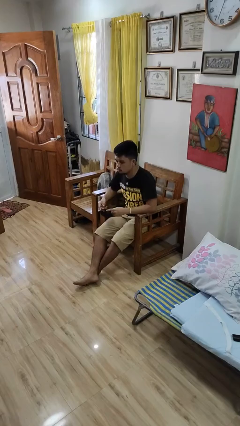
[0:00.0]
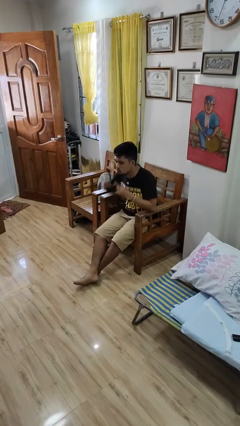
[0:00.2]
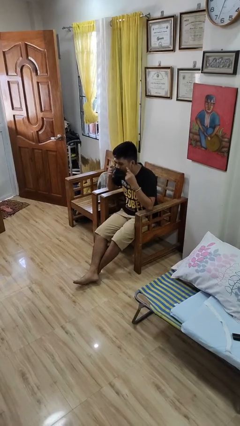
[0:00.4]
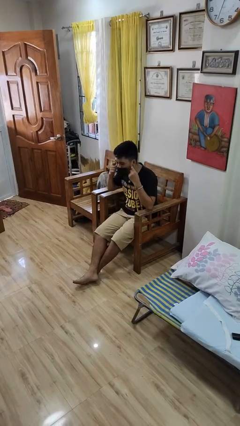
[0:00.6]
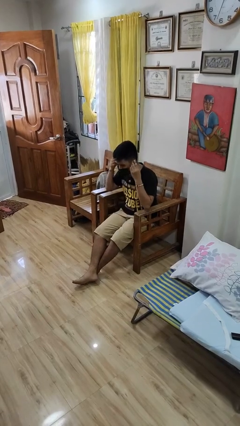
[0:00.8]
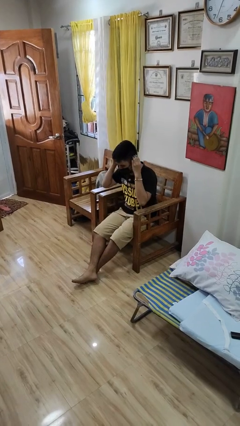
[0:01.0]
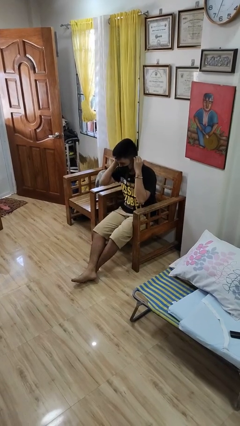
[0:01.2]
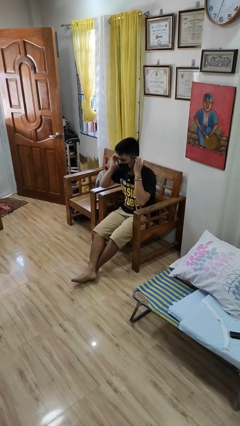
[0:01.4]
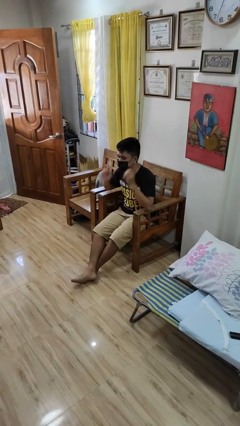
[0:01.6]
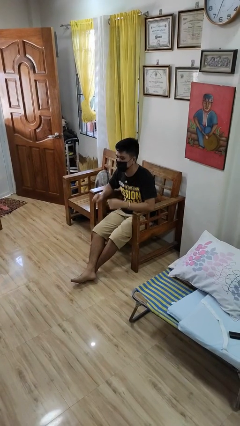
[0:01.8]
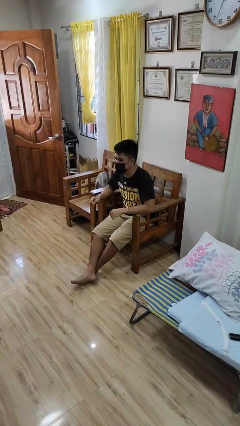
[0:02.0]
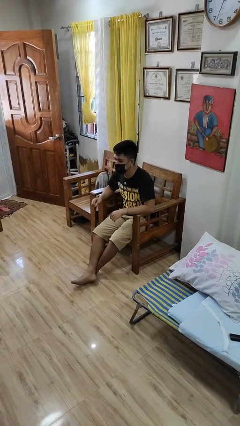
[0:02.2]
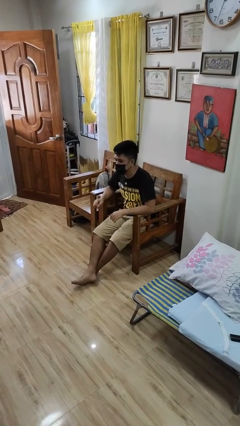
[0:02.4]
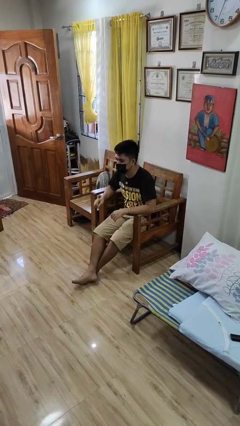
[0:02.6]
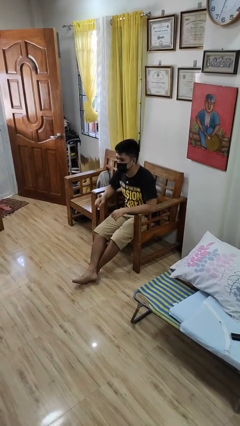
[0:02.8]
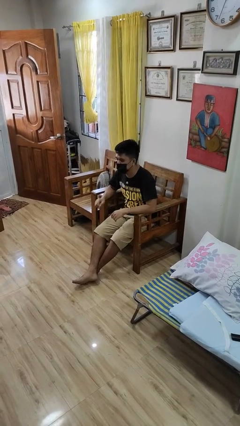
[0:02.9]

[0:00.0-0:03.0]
person puts on facemask

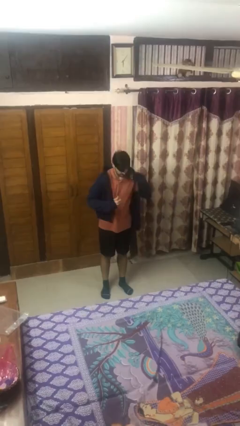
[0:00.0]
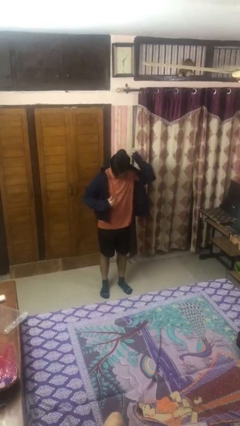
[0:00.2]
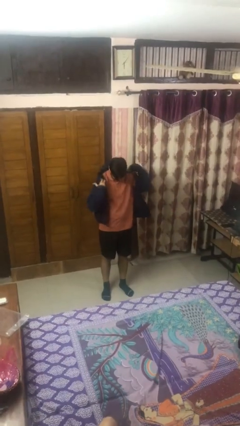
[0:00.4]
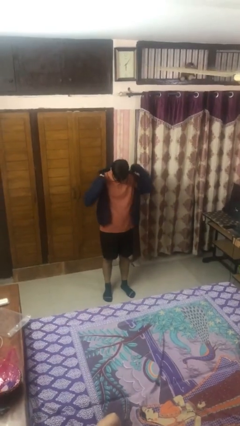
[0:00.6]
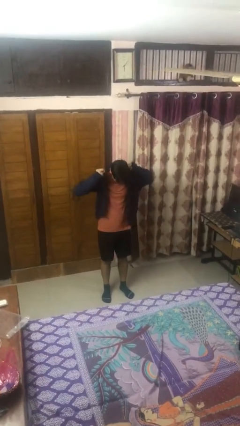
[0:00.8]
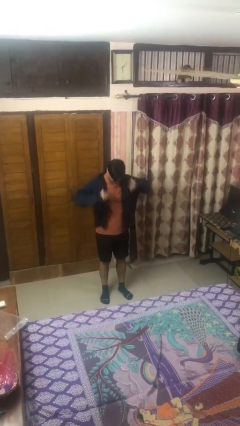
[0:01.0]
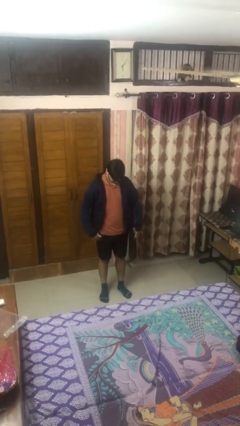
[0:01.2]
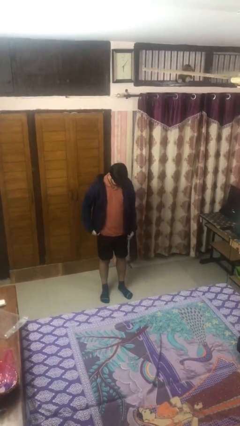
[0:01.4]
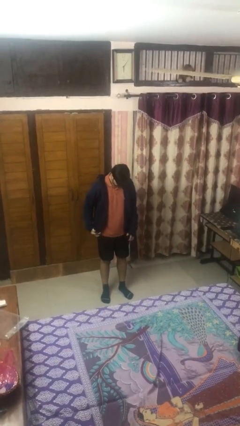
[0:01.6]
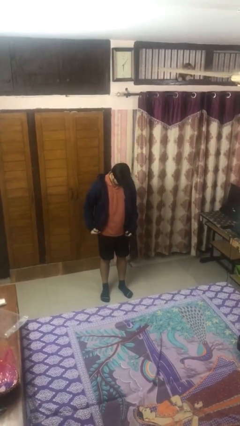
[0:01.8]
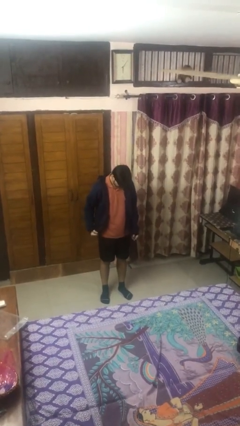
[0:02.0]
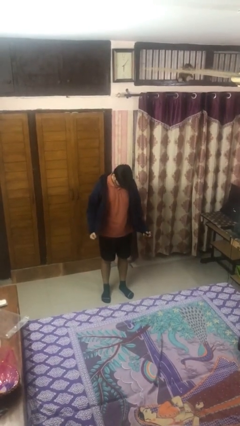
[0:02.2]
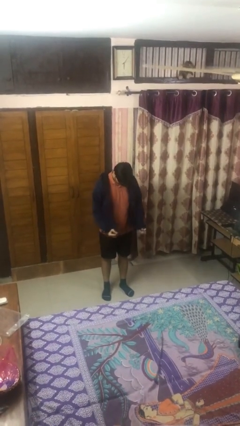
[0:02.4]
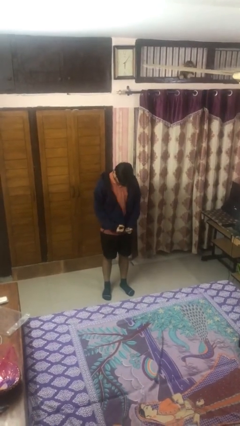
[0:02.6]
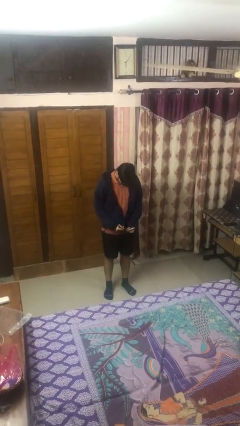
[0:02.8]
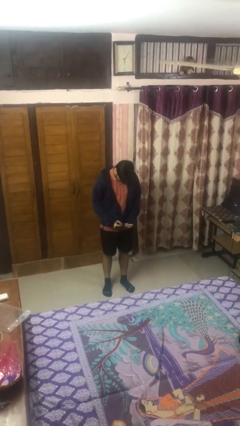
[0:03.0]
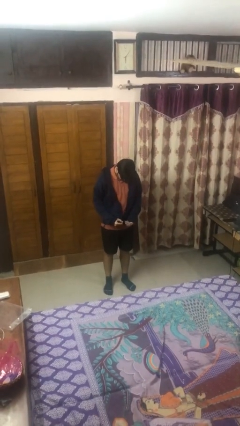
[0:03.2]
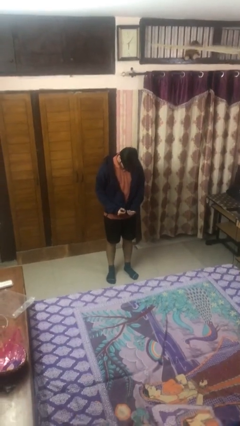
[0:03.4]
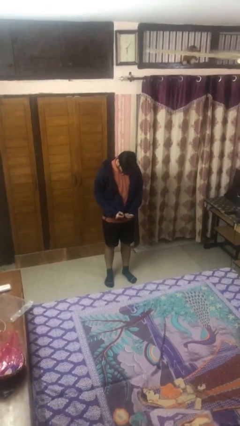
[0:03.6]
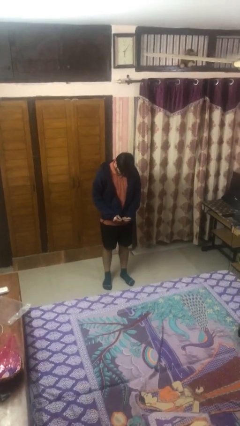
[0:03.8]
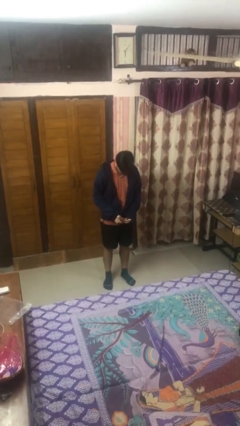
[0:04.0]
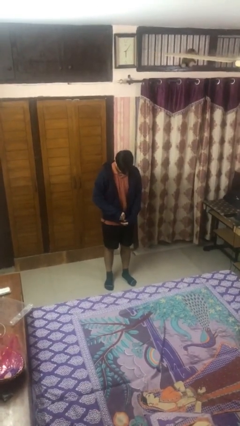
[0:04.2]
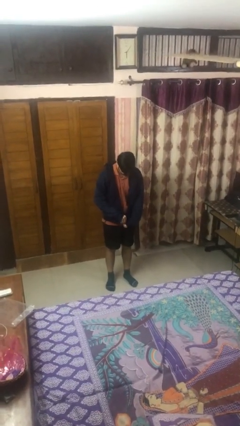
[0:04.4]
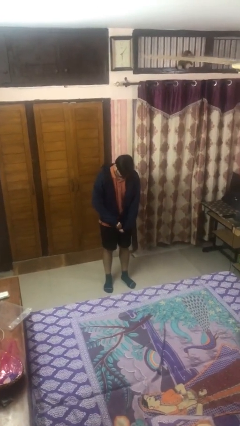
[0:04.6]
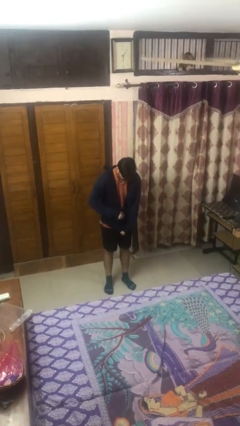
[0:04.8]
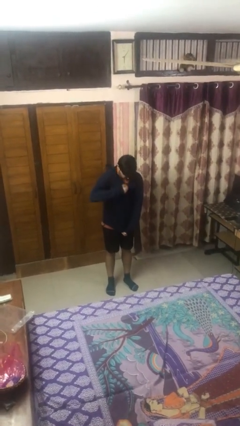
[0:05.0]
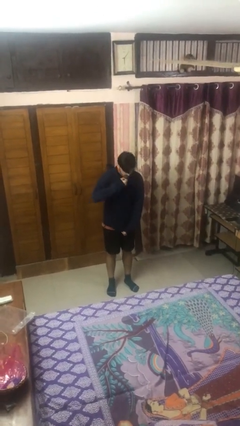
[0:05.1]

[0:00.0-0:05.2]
person zips up jacket

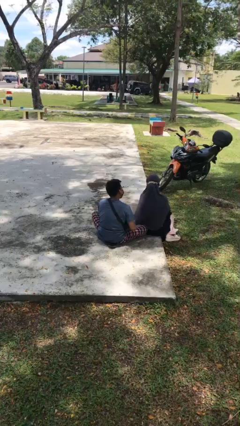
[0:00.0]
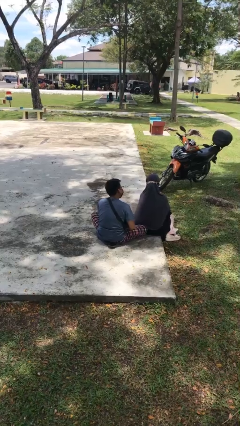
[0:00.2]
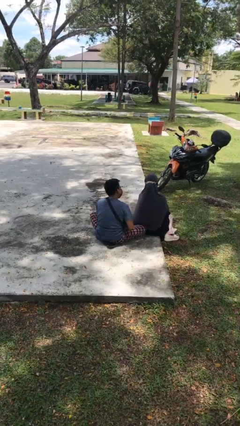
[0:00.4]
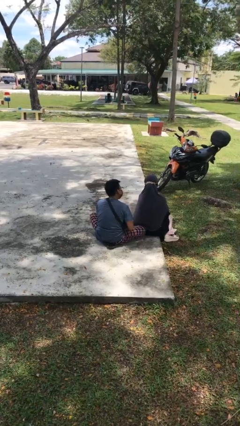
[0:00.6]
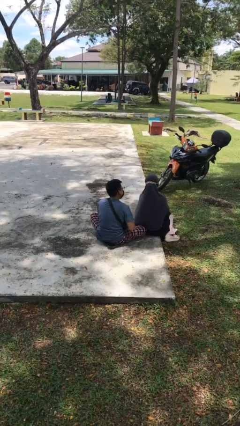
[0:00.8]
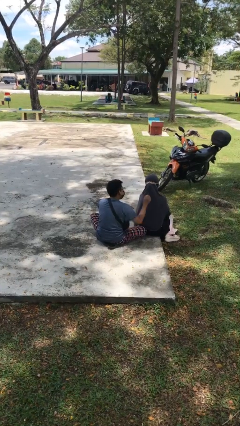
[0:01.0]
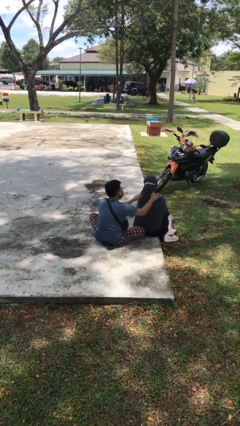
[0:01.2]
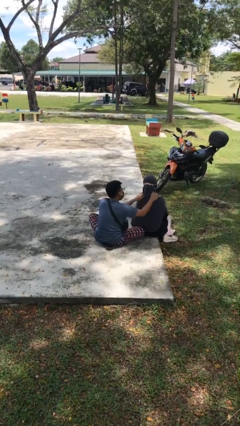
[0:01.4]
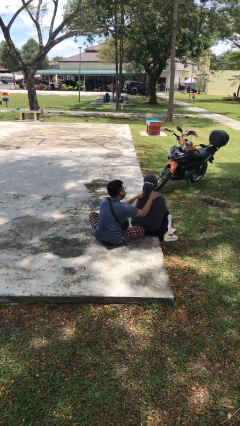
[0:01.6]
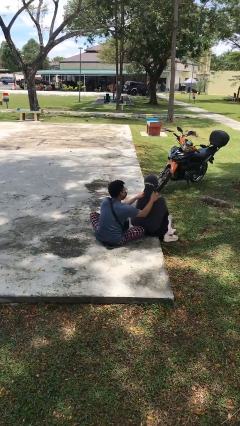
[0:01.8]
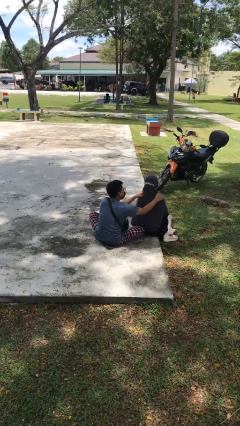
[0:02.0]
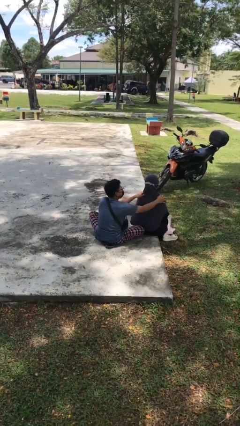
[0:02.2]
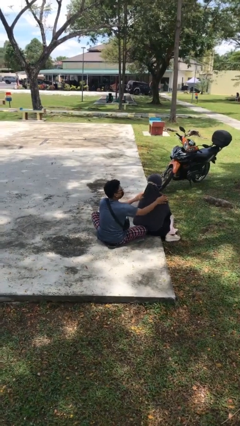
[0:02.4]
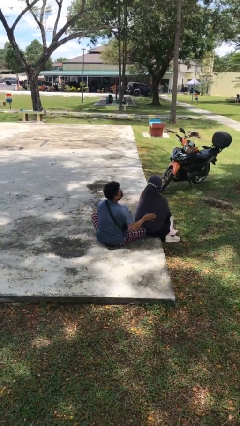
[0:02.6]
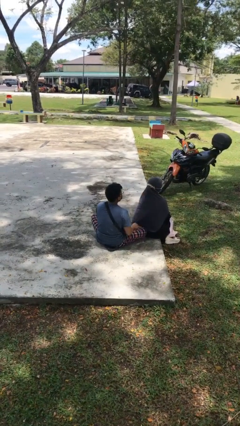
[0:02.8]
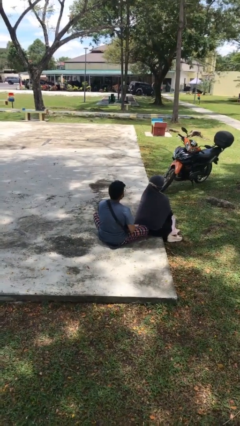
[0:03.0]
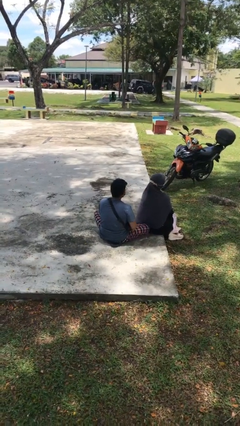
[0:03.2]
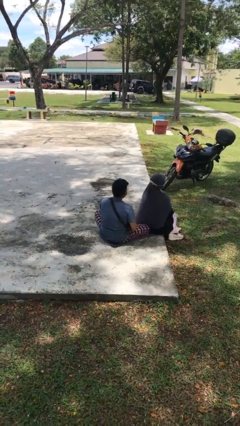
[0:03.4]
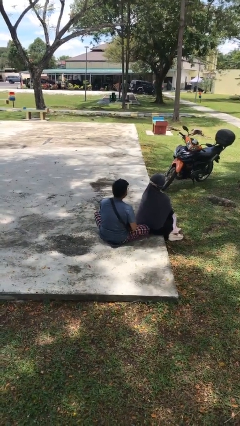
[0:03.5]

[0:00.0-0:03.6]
person pounds shoulders of person

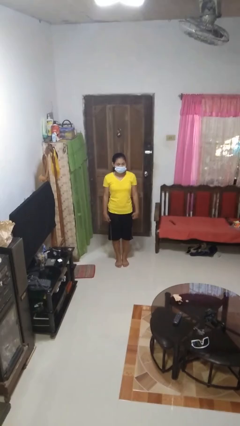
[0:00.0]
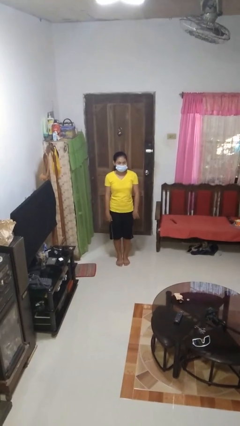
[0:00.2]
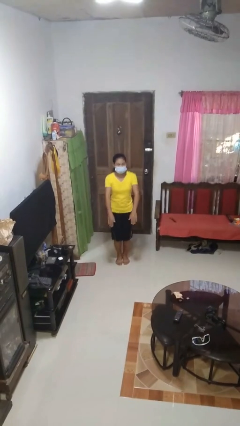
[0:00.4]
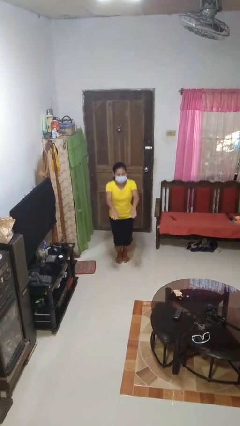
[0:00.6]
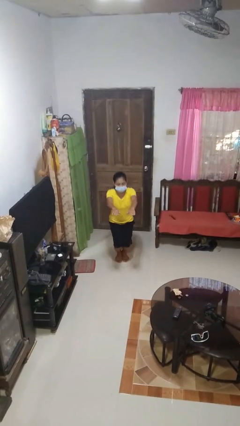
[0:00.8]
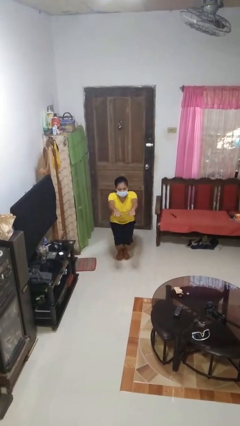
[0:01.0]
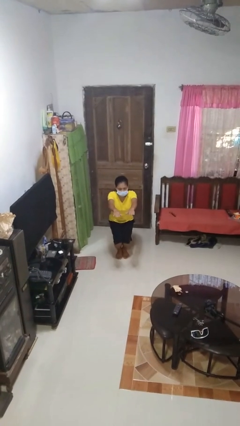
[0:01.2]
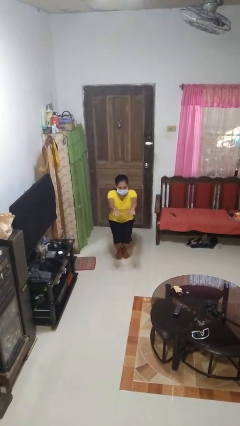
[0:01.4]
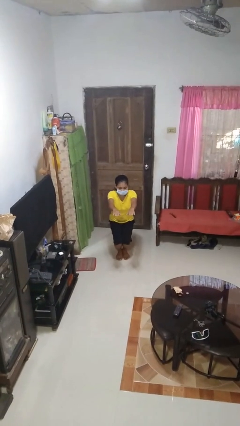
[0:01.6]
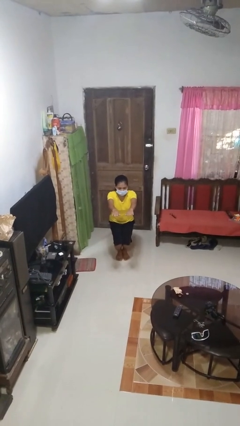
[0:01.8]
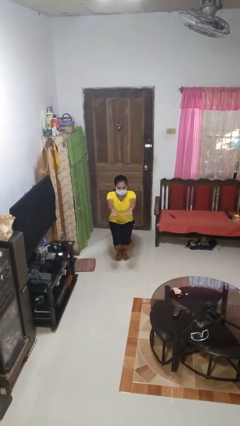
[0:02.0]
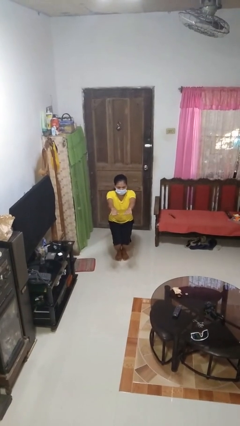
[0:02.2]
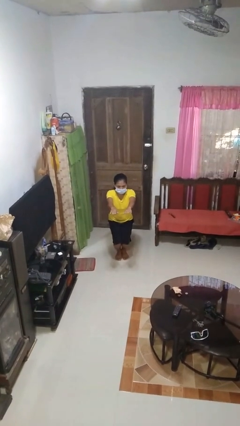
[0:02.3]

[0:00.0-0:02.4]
person squats

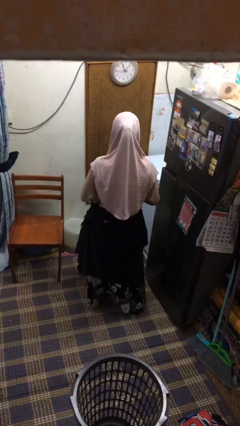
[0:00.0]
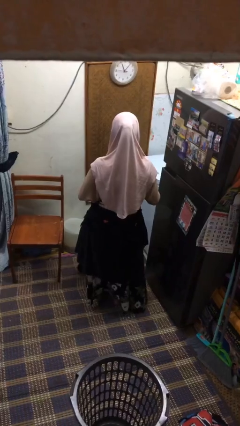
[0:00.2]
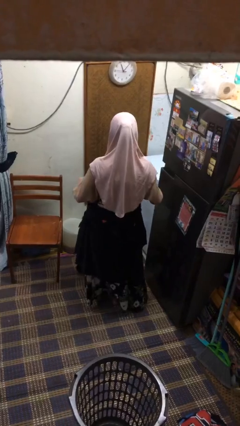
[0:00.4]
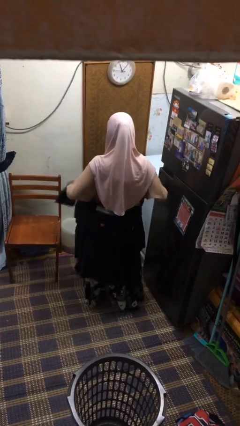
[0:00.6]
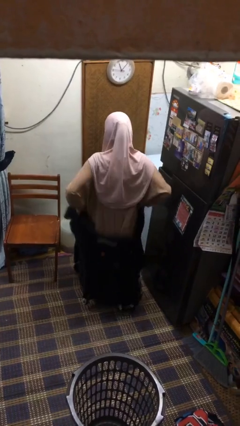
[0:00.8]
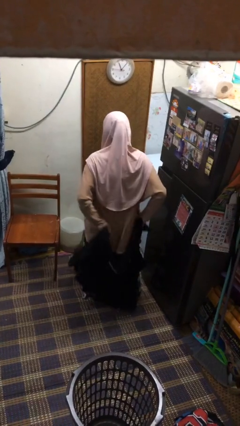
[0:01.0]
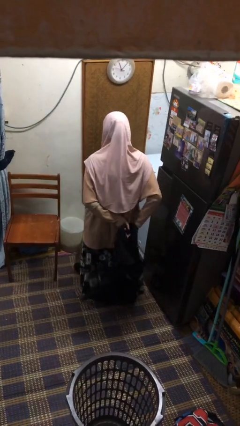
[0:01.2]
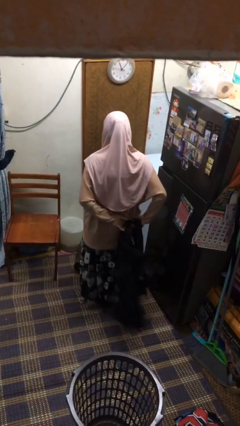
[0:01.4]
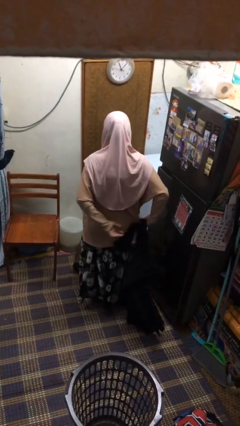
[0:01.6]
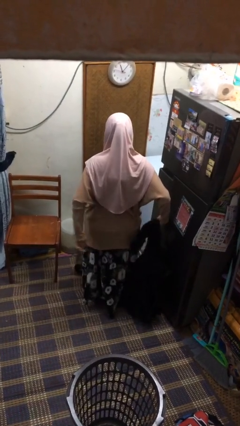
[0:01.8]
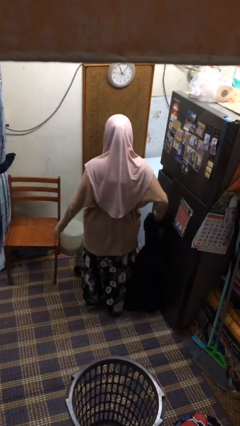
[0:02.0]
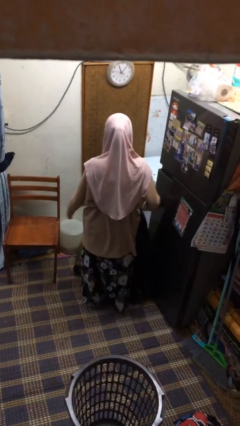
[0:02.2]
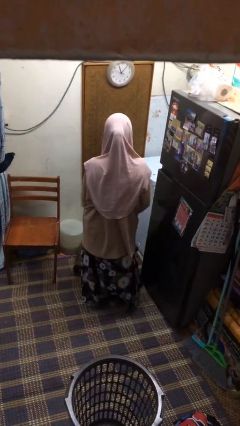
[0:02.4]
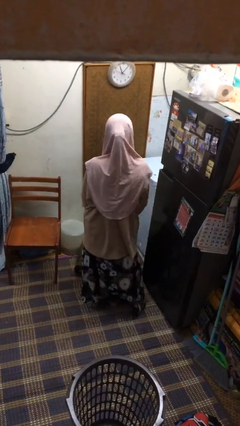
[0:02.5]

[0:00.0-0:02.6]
person unties jacket around waist

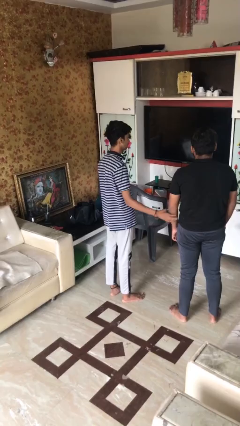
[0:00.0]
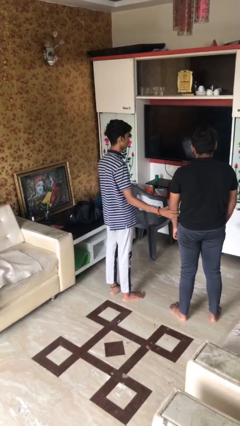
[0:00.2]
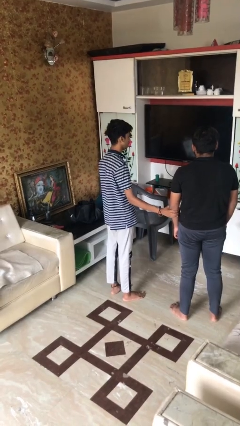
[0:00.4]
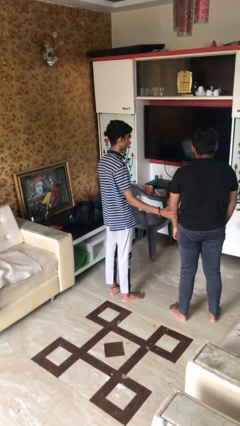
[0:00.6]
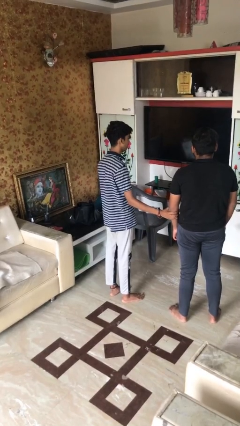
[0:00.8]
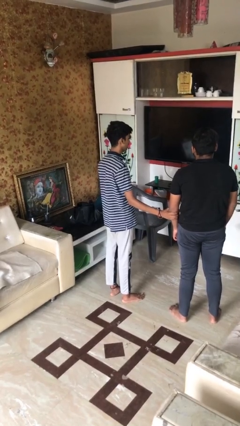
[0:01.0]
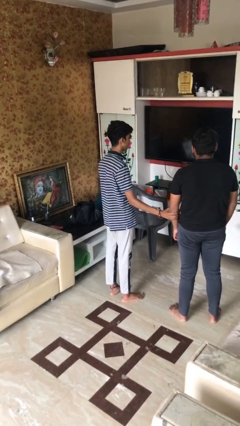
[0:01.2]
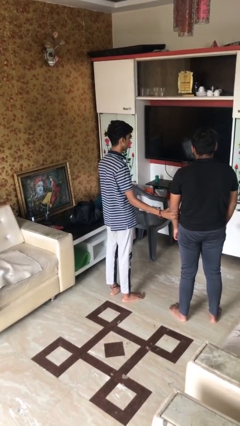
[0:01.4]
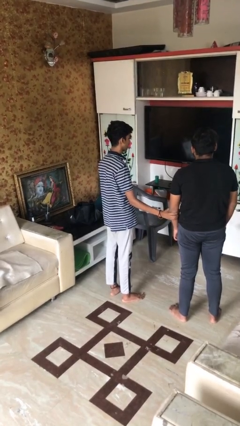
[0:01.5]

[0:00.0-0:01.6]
person grabs person by forearm
